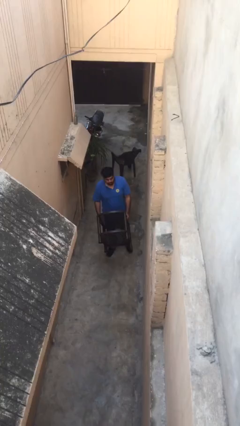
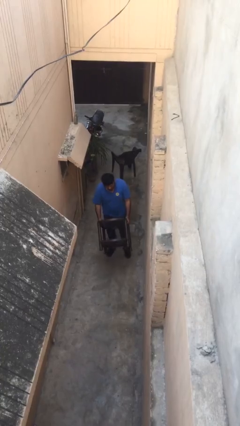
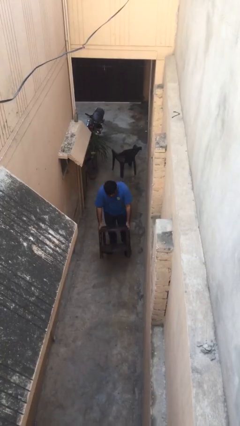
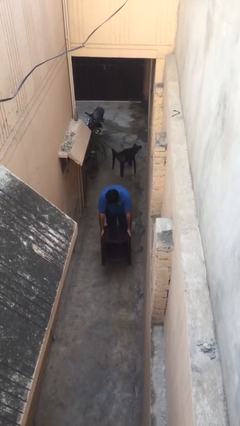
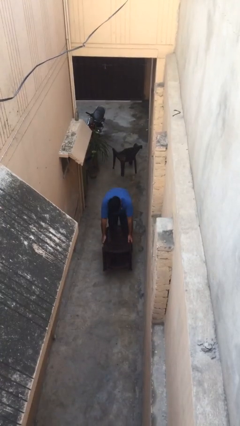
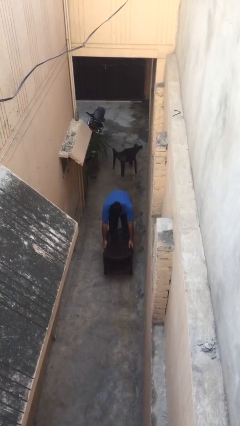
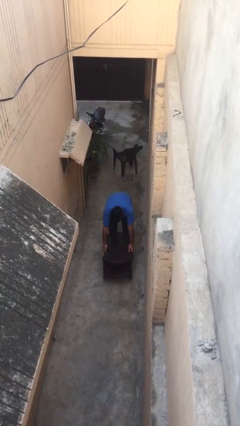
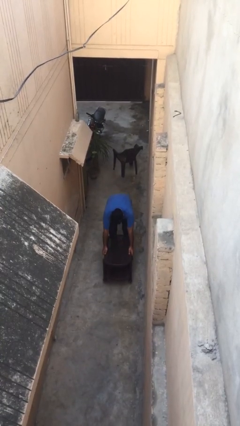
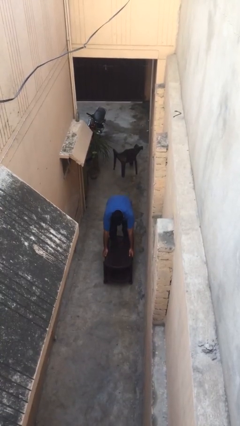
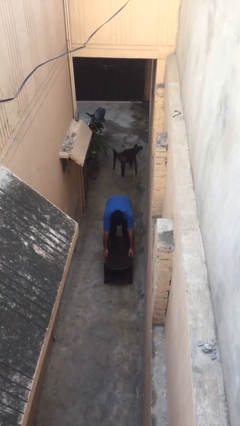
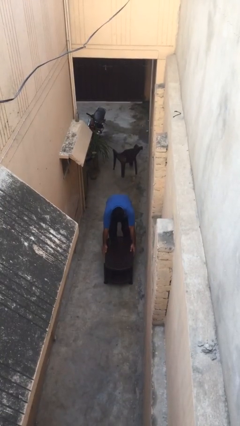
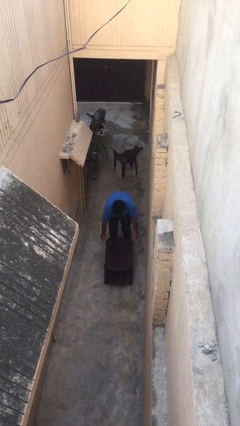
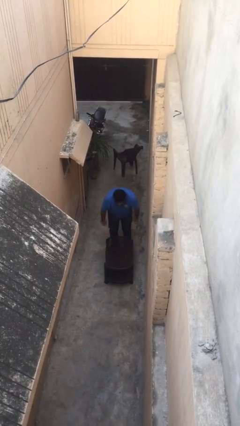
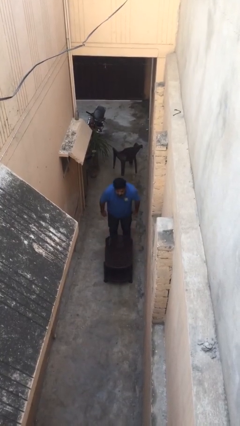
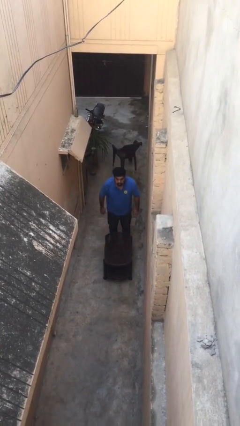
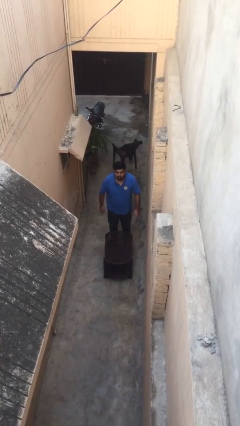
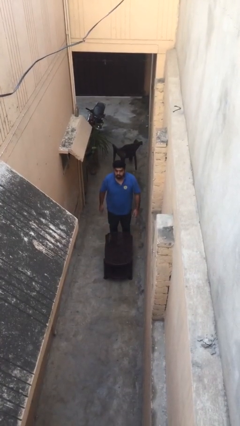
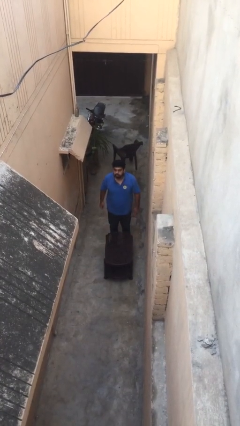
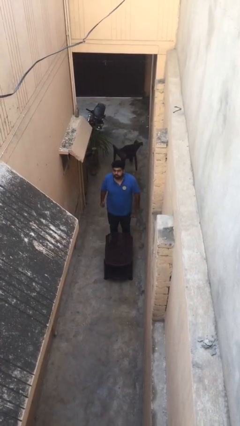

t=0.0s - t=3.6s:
person puts down object on floor

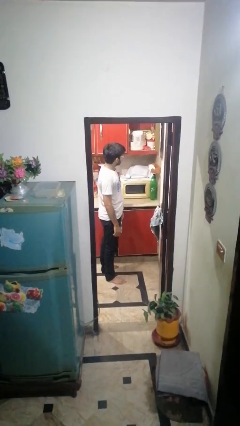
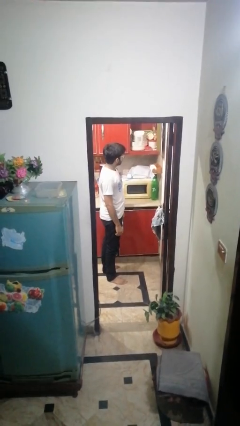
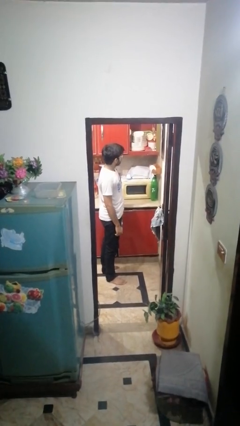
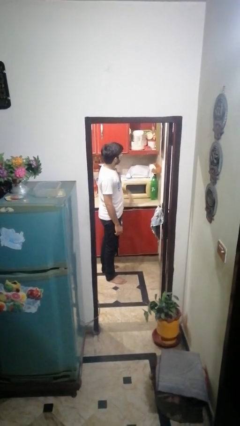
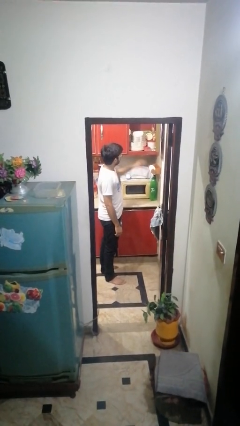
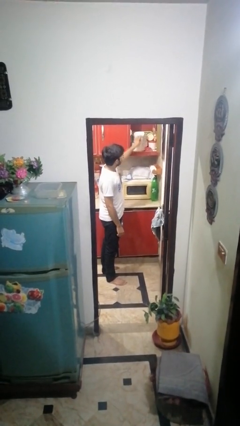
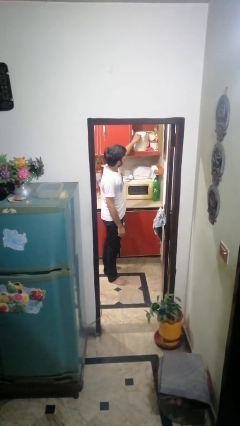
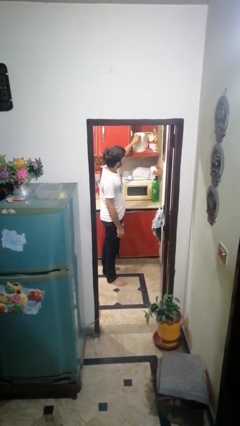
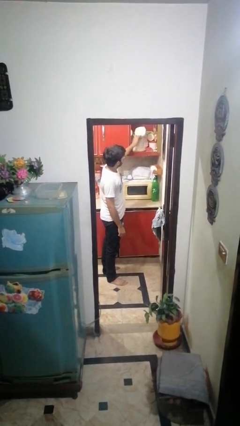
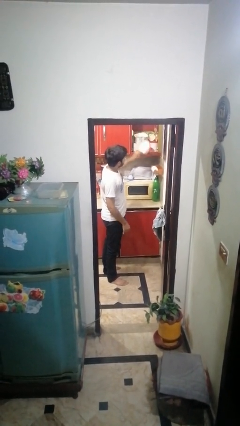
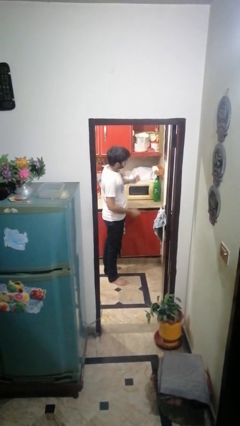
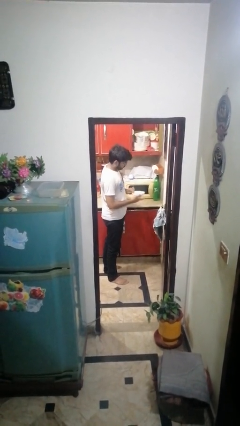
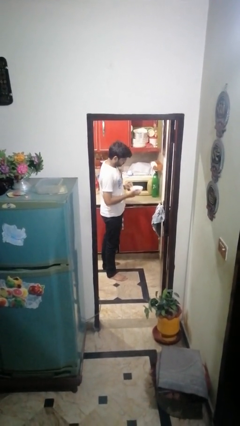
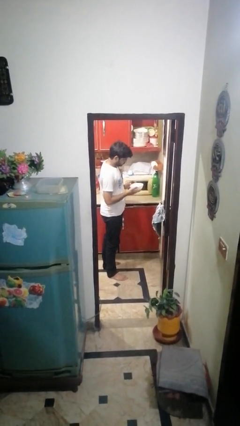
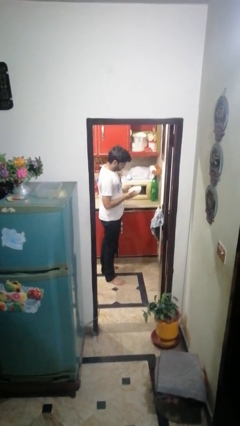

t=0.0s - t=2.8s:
person picks up object from cabinet

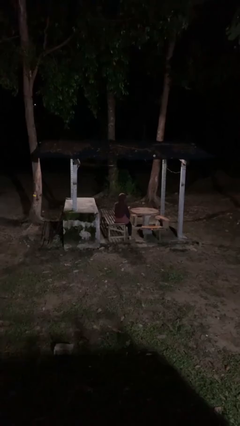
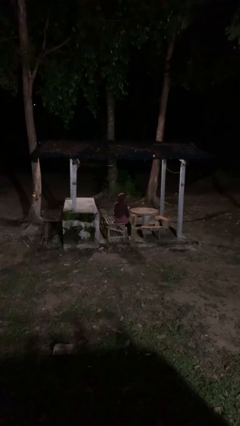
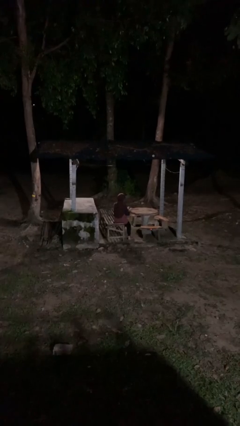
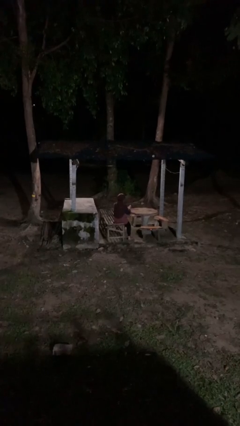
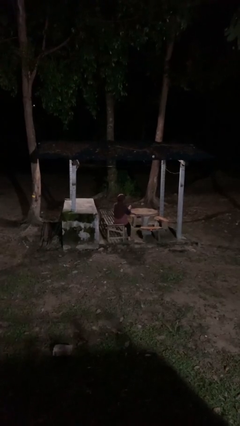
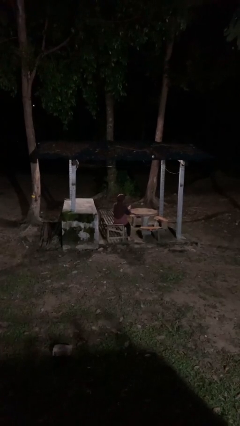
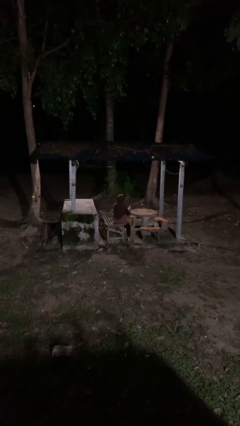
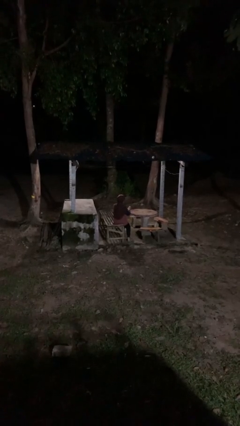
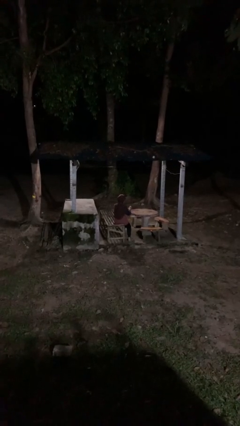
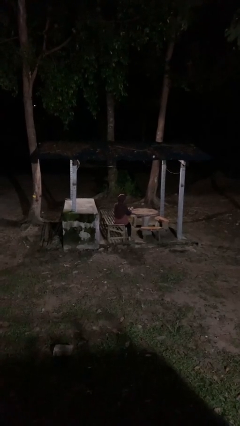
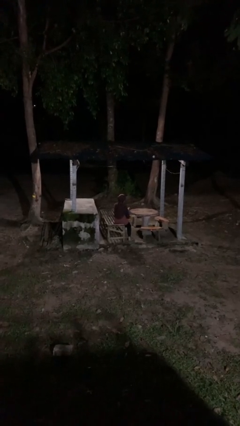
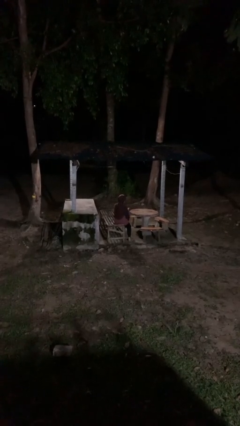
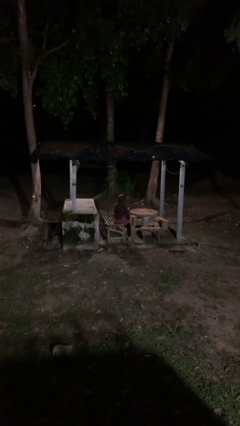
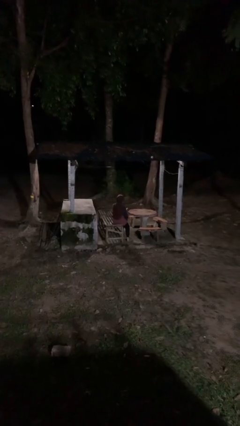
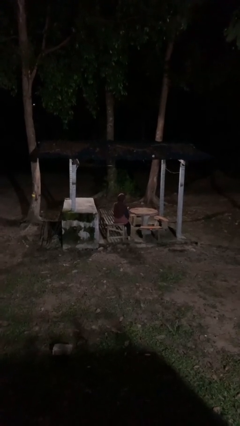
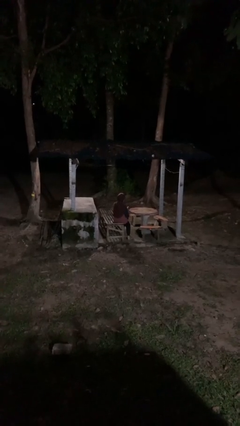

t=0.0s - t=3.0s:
person paints fingernails

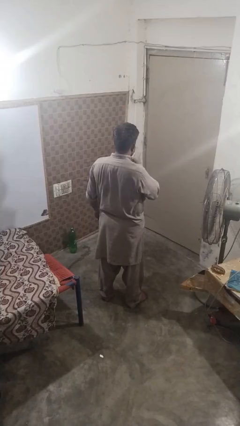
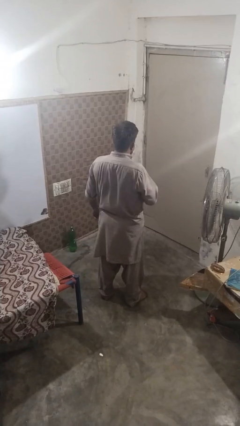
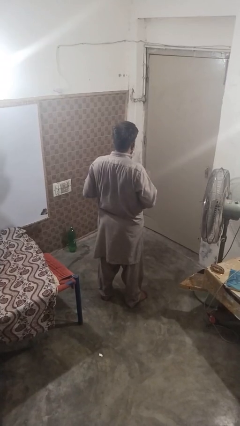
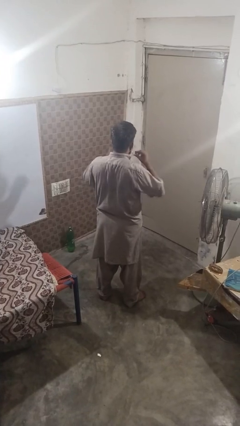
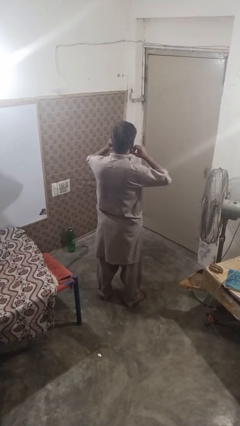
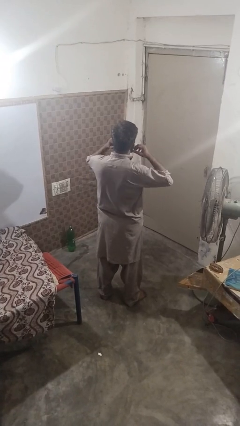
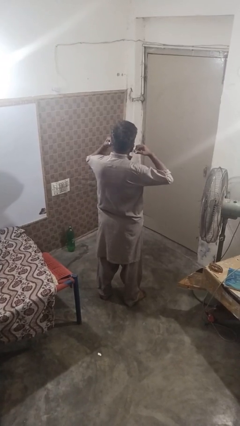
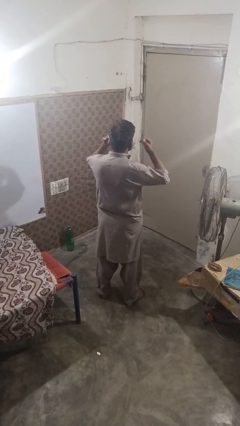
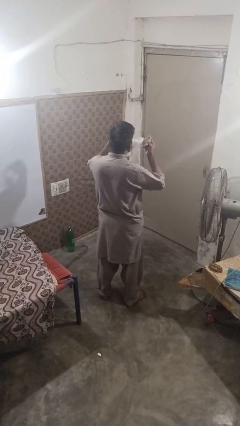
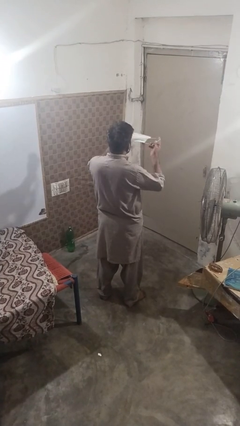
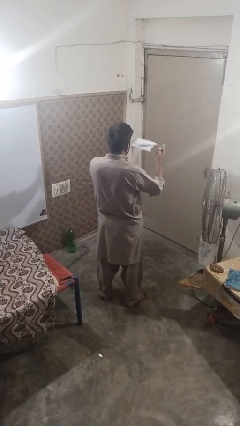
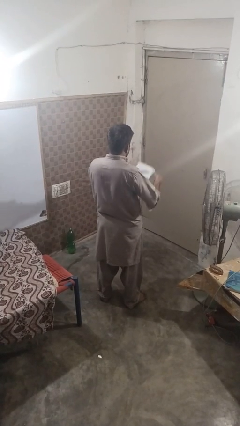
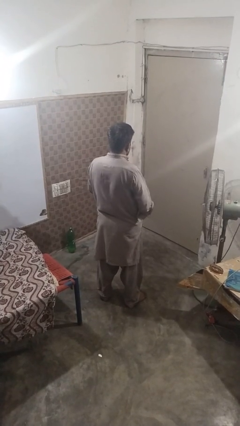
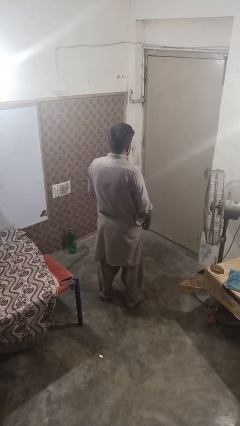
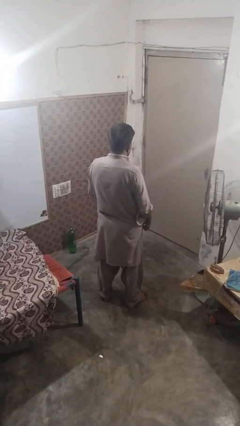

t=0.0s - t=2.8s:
person takes off facemask

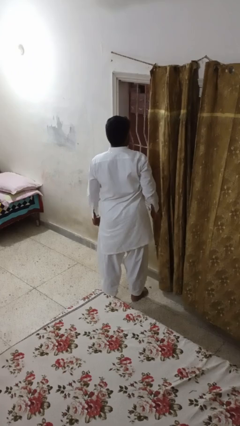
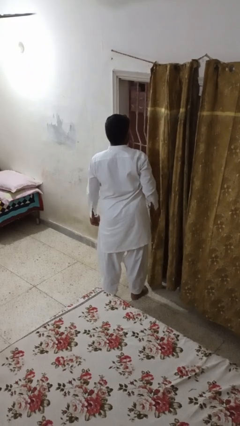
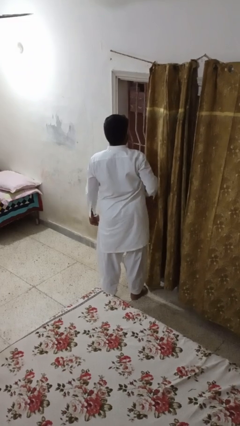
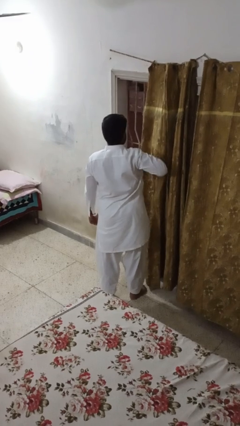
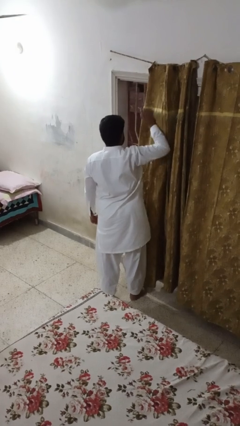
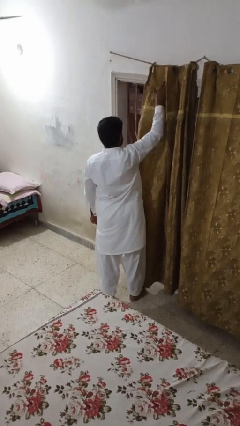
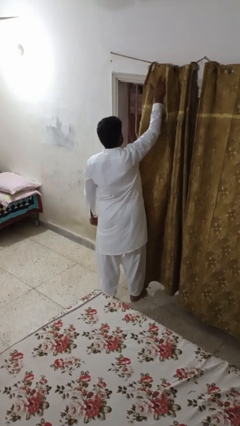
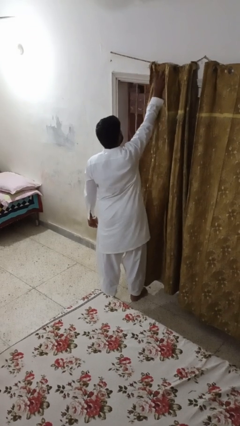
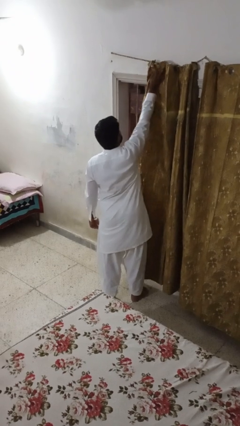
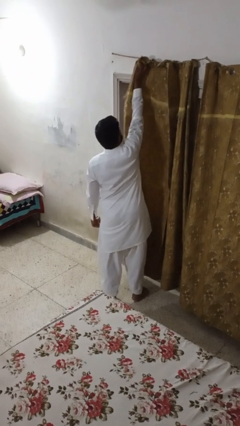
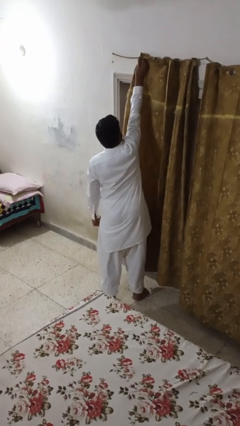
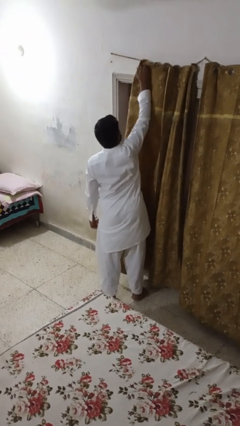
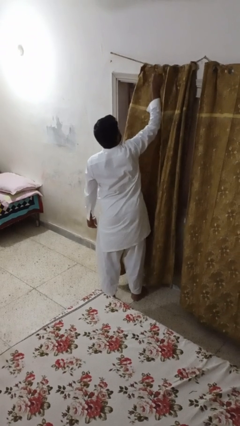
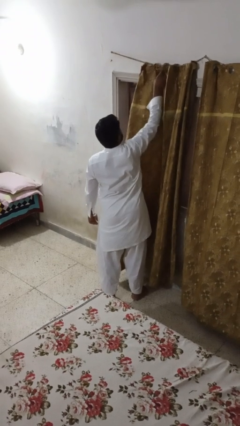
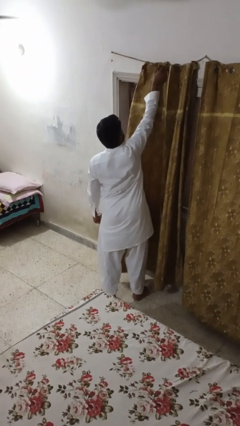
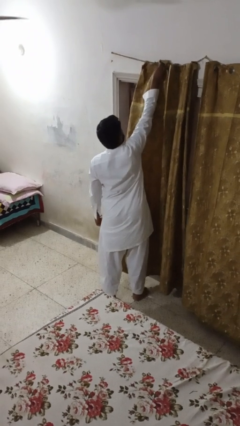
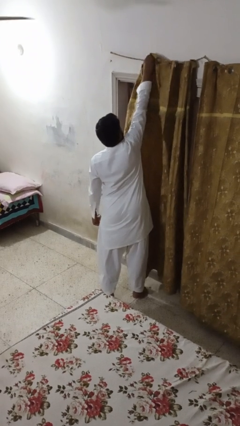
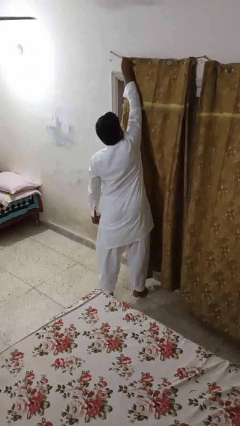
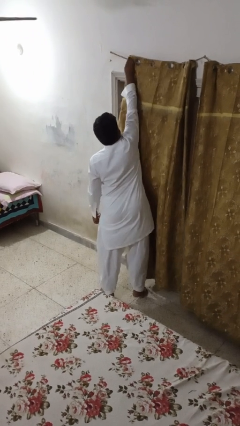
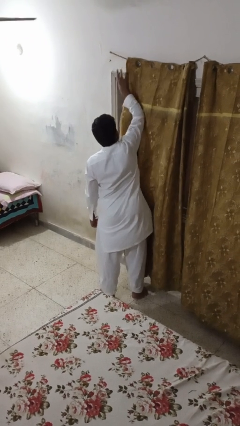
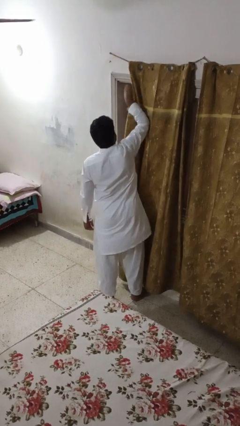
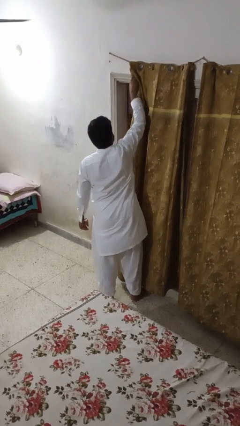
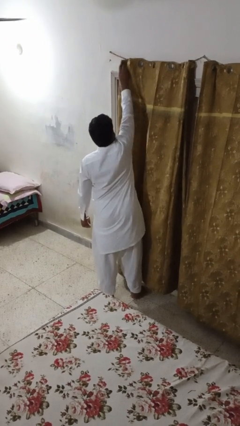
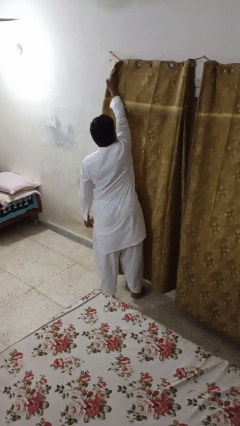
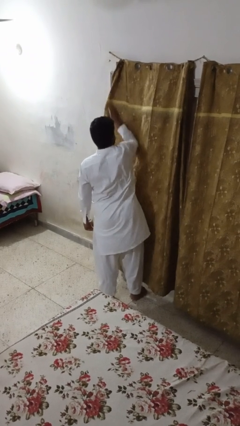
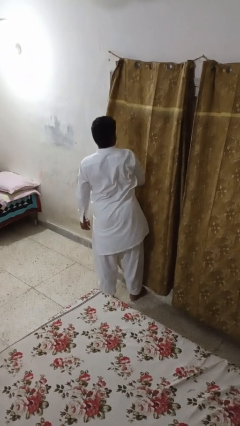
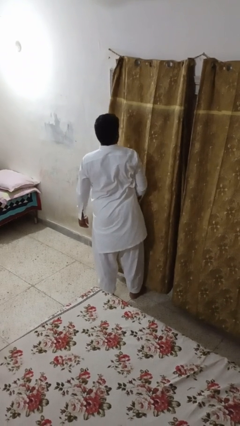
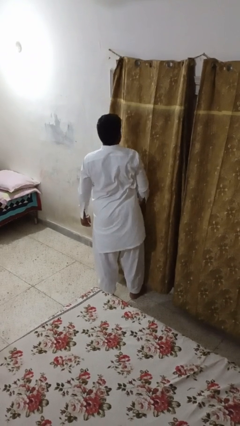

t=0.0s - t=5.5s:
person closes curtains
